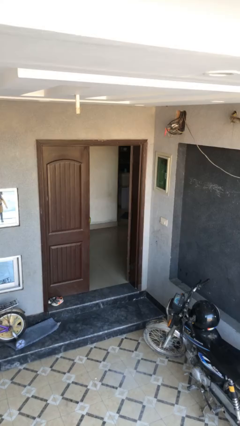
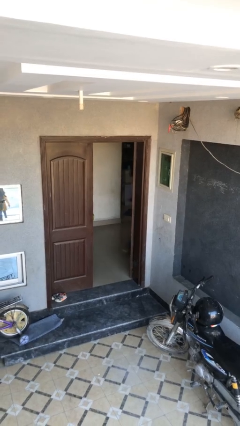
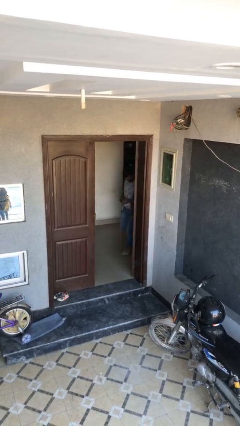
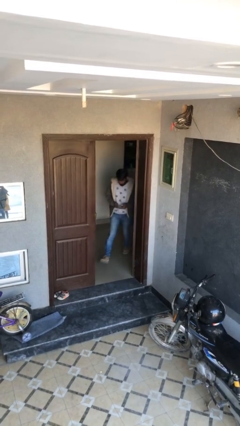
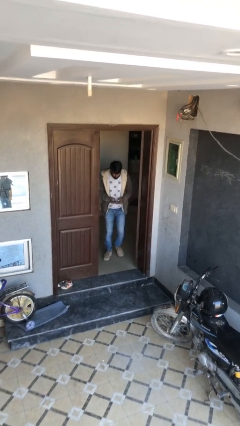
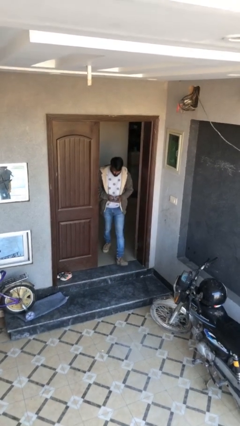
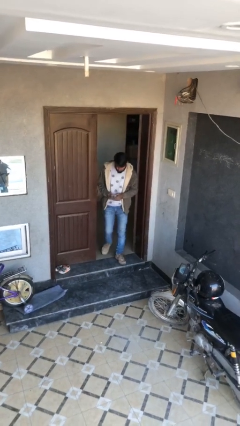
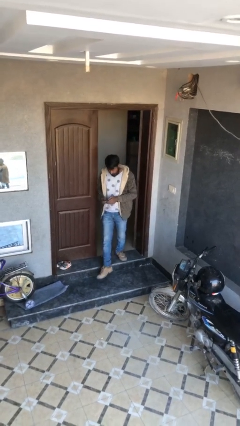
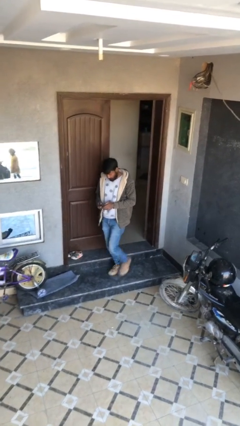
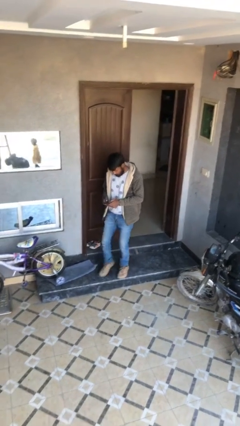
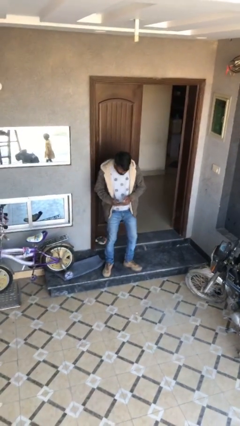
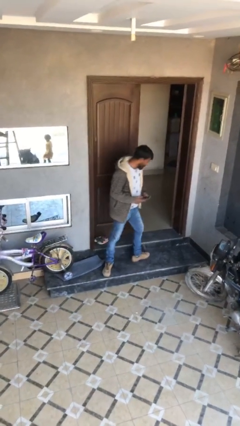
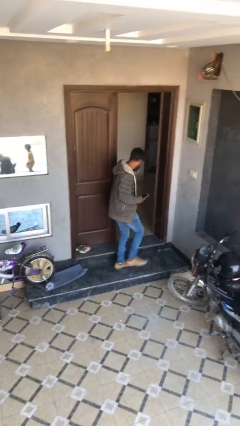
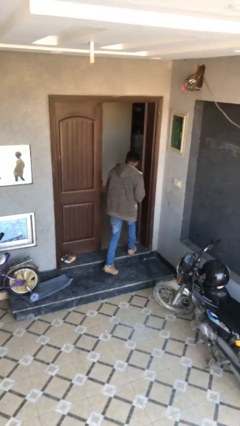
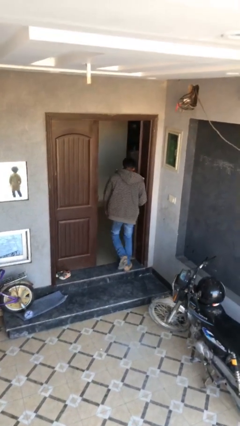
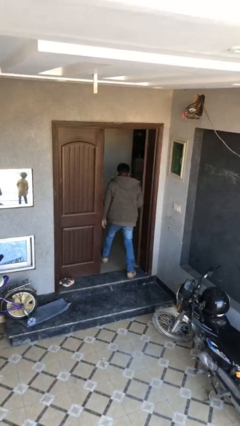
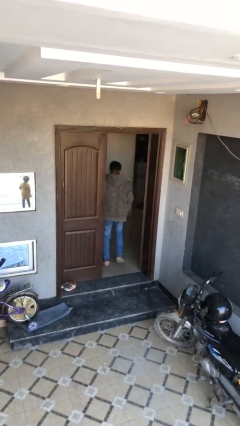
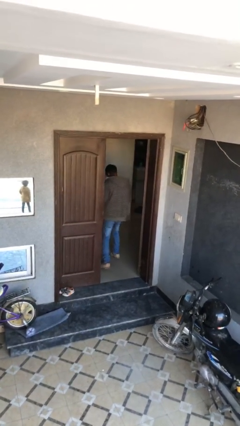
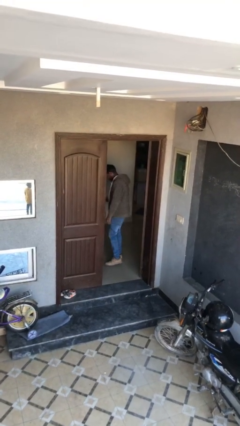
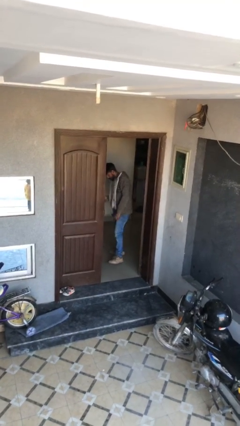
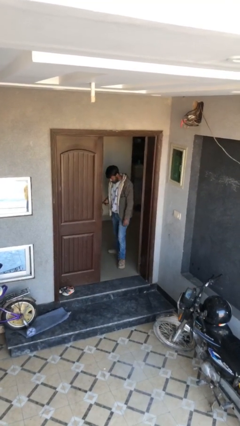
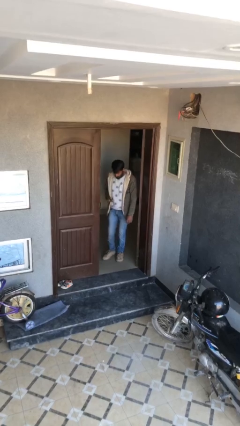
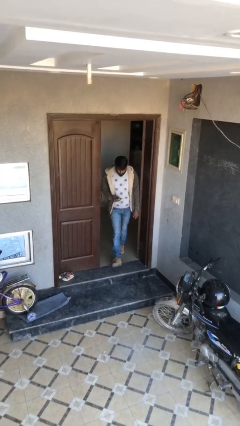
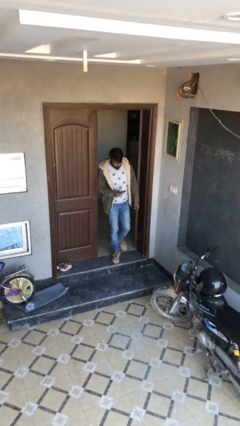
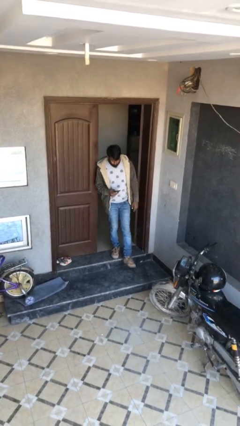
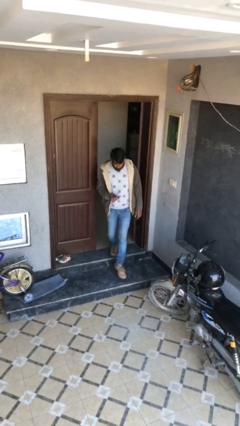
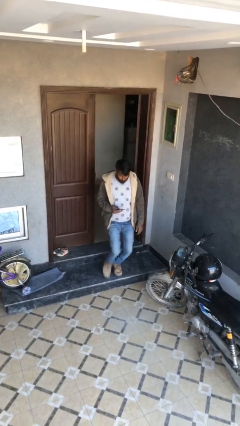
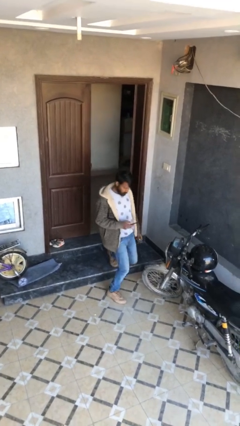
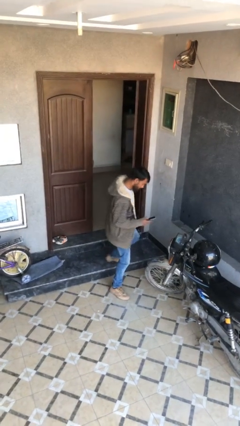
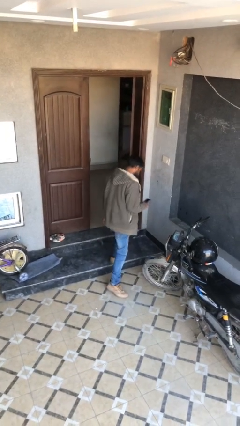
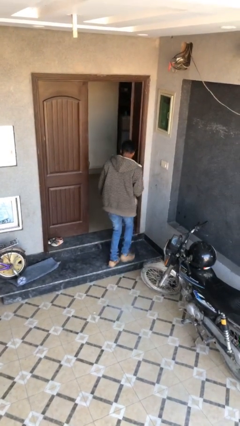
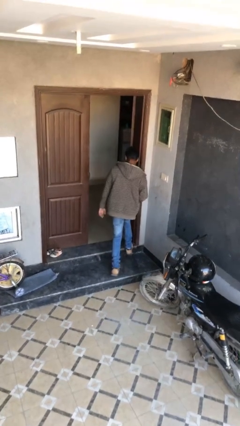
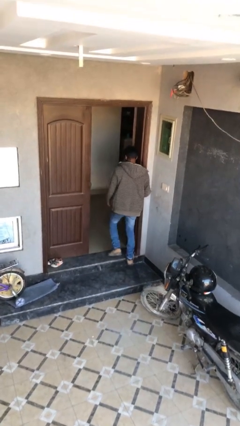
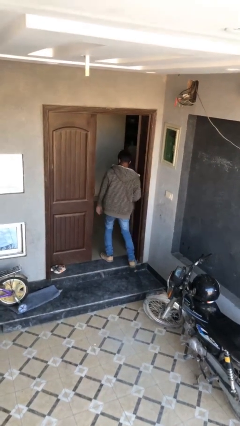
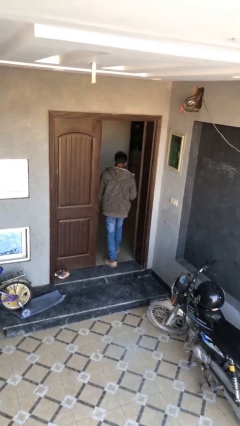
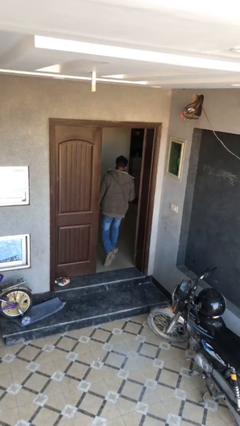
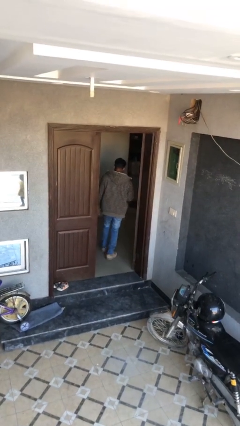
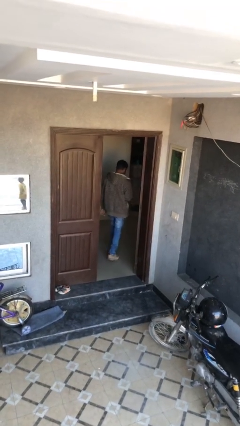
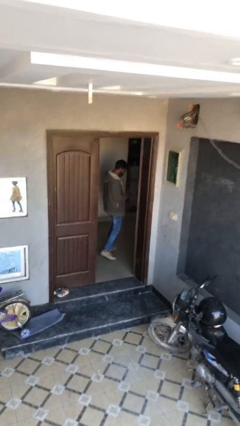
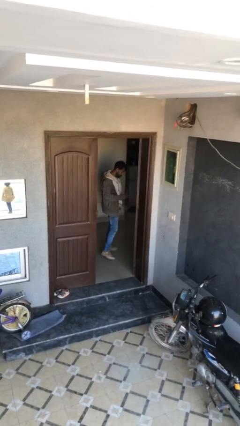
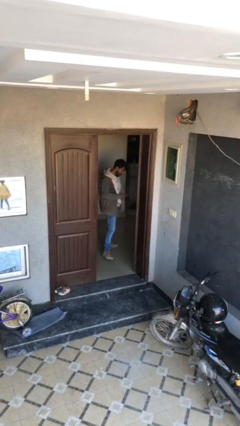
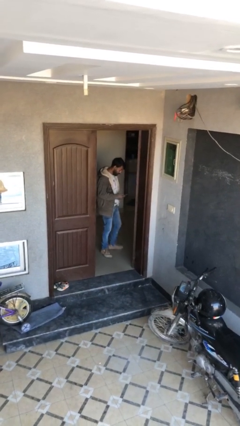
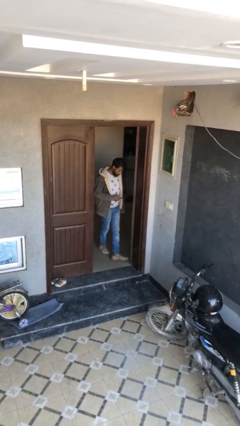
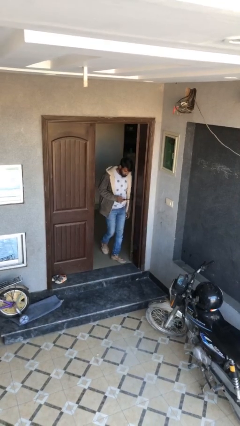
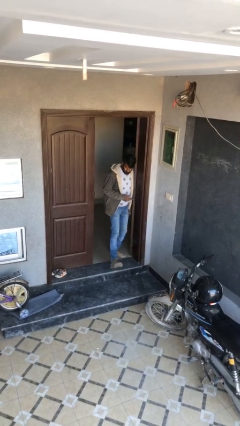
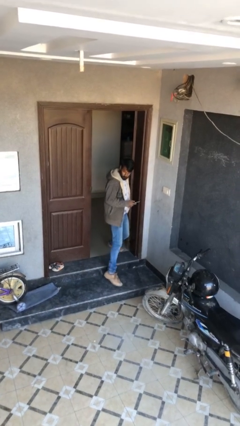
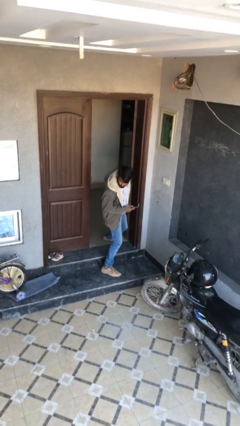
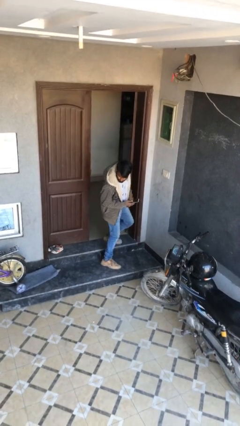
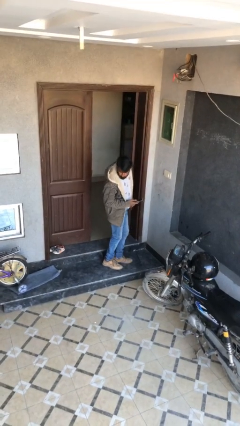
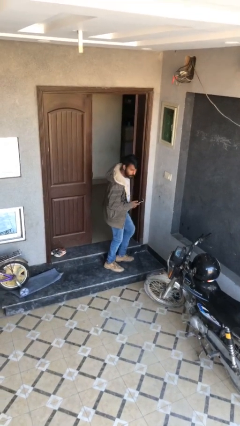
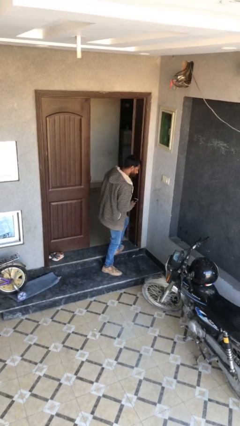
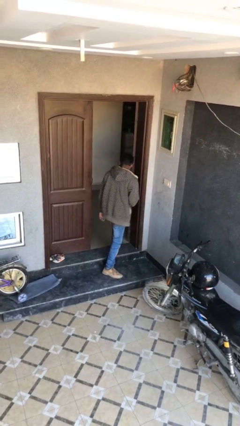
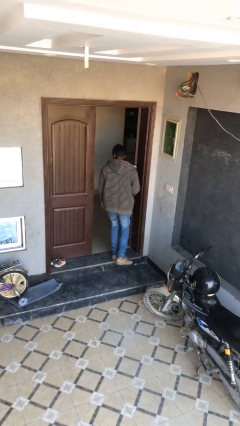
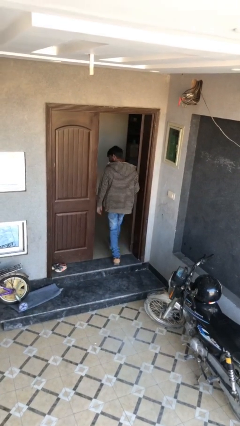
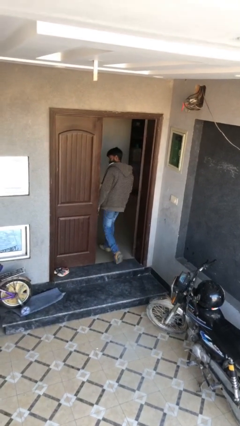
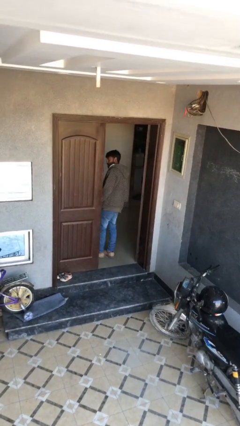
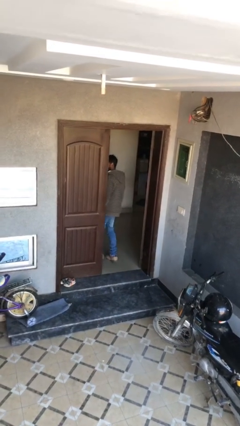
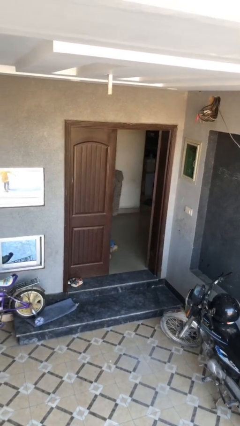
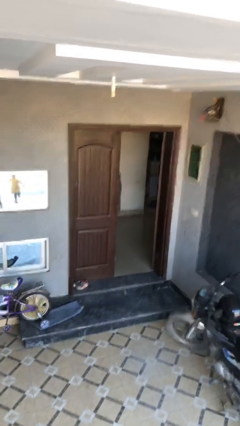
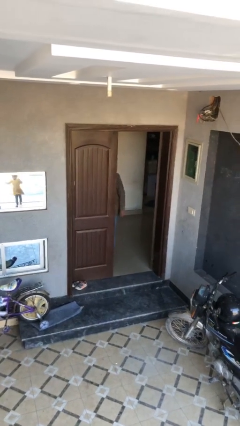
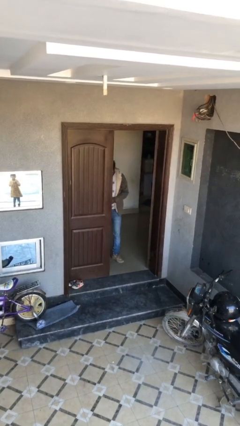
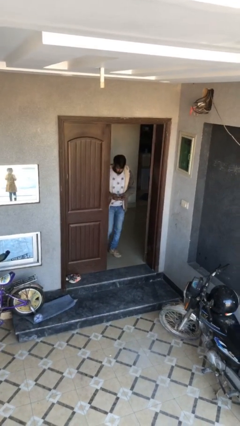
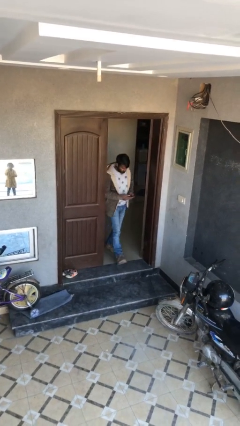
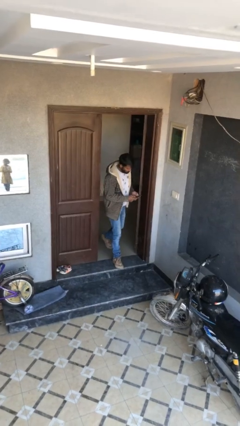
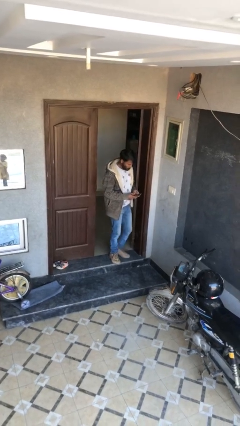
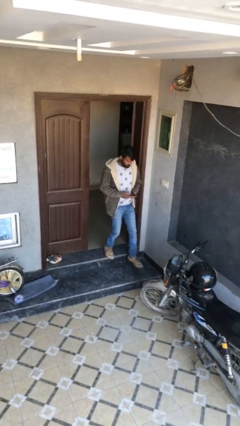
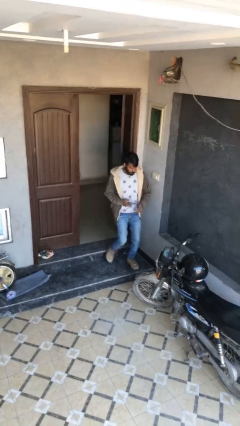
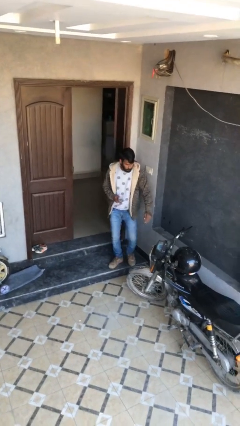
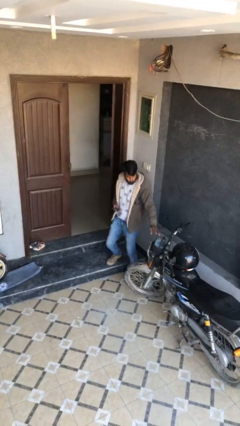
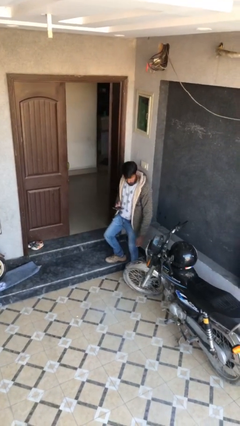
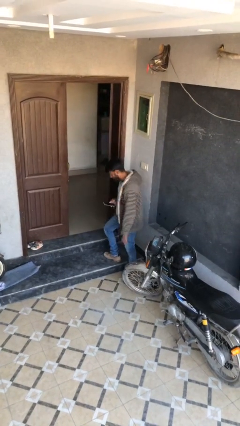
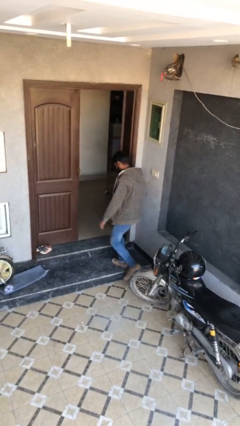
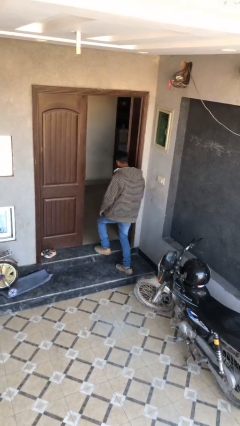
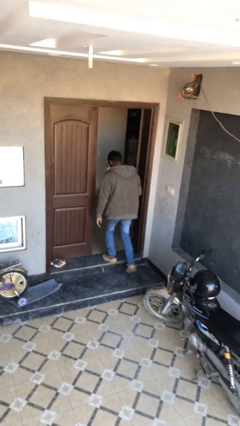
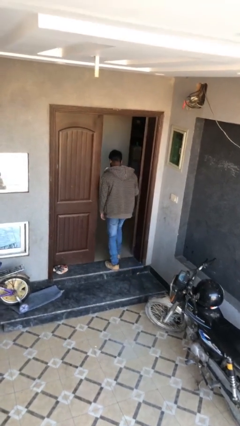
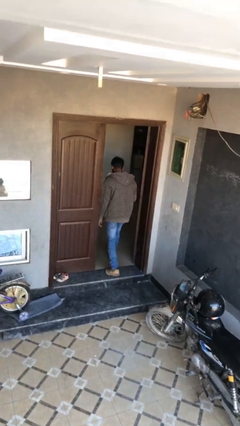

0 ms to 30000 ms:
person texts on phone

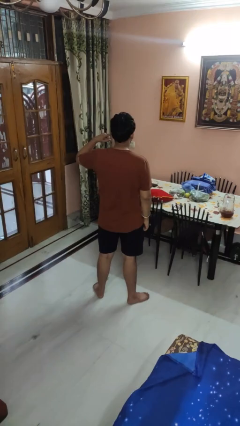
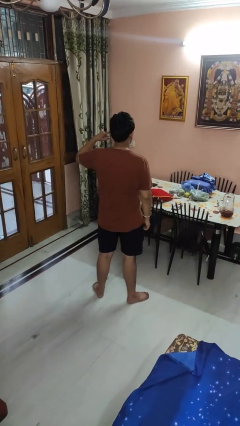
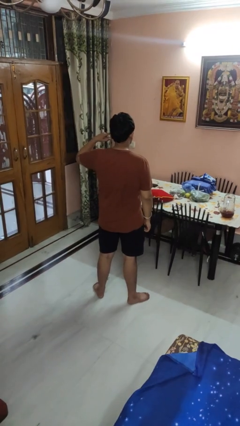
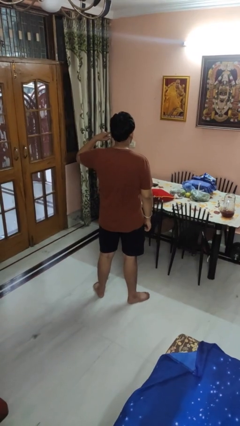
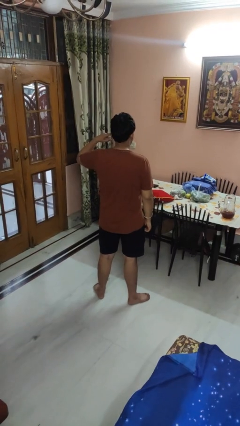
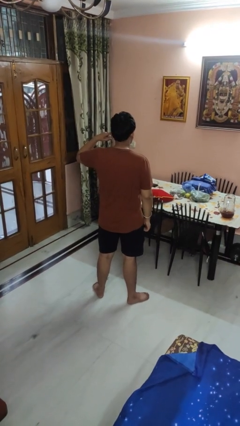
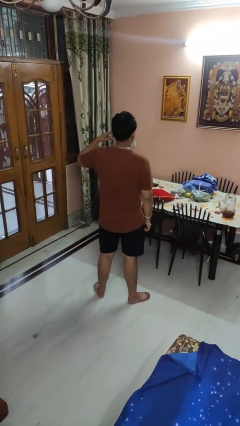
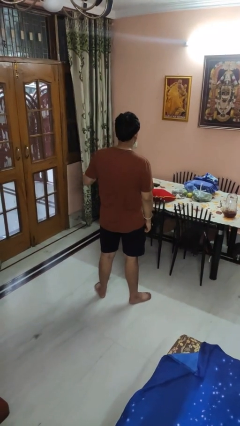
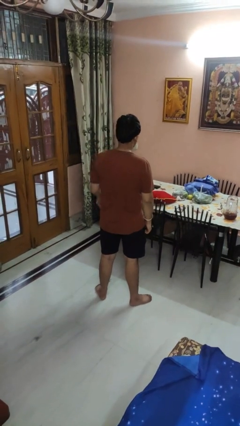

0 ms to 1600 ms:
person gestures listen closely

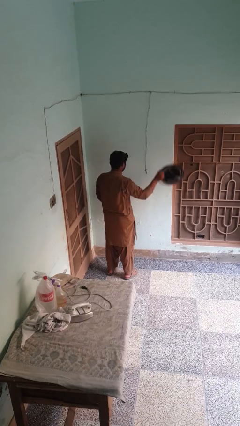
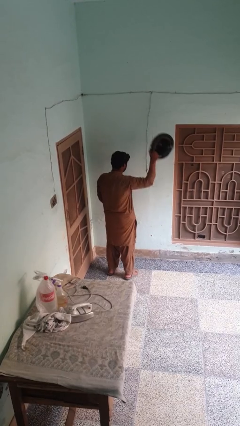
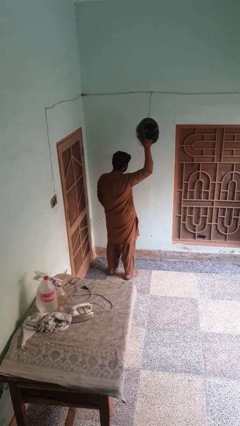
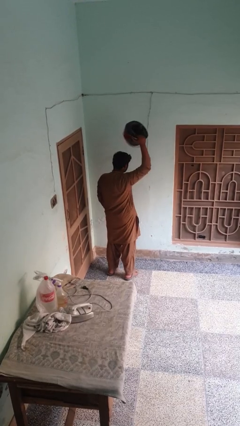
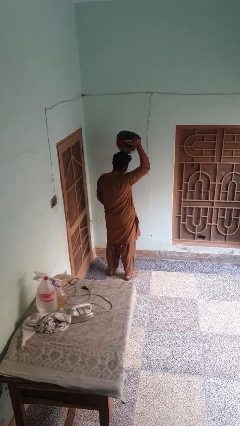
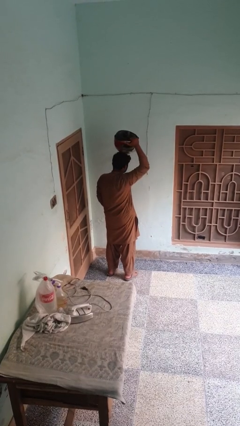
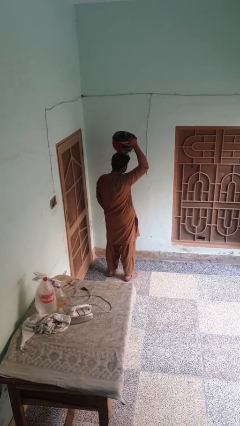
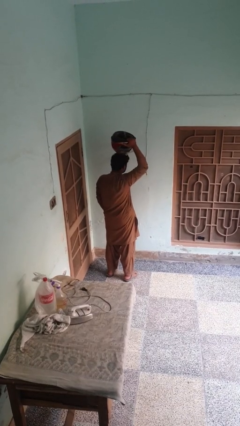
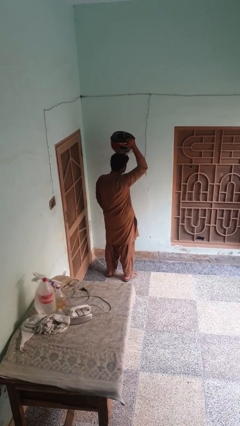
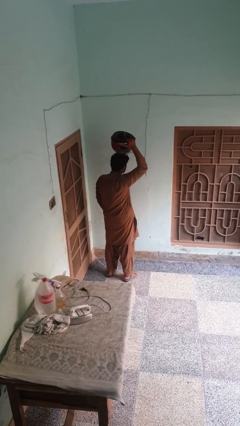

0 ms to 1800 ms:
person holds object above head
